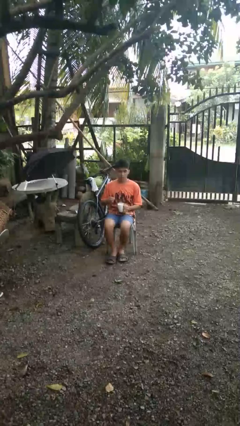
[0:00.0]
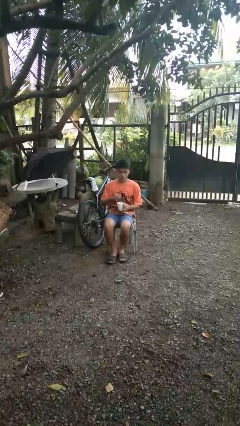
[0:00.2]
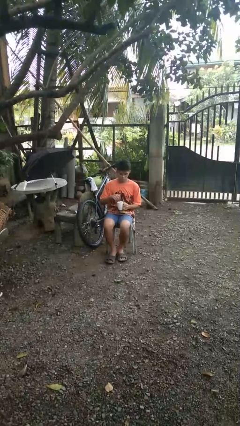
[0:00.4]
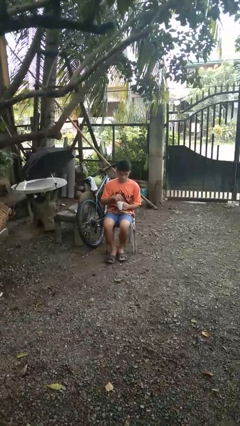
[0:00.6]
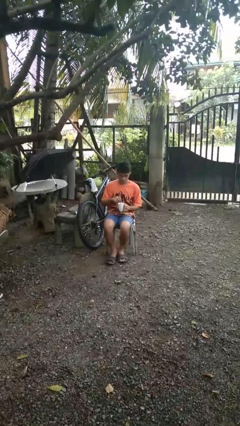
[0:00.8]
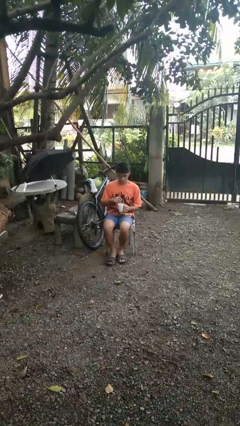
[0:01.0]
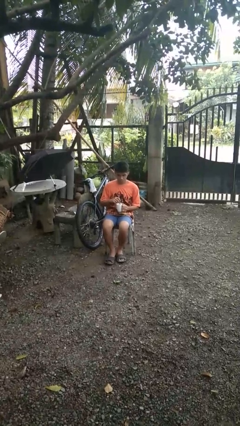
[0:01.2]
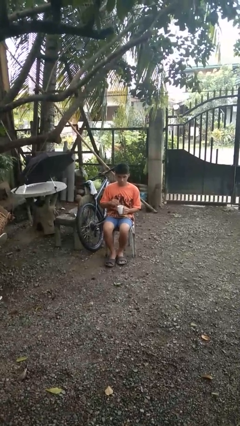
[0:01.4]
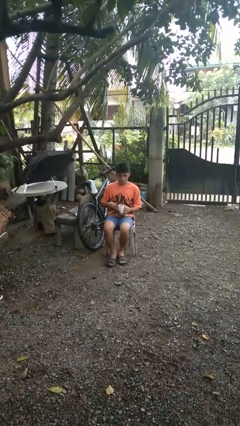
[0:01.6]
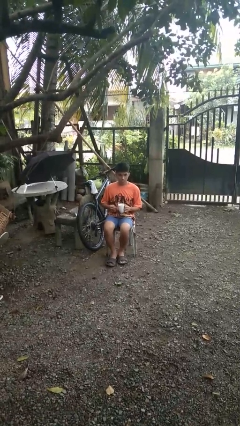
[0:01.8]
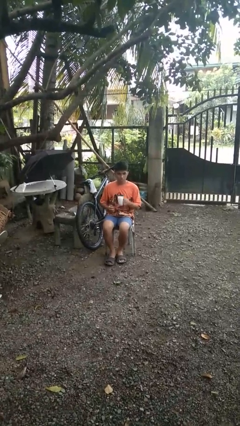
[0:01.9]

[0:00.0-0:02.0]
person stirs mug

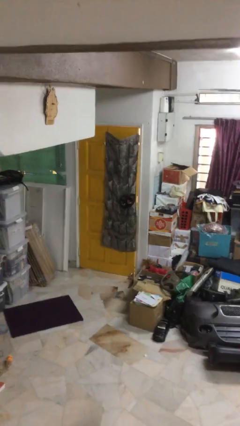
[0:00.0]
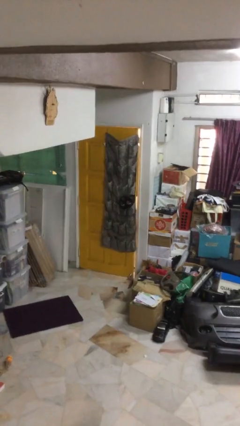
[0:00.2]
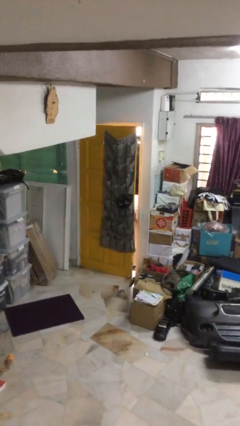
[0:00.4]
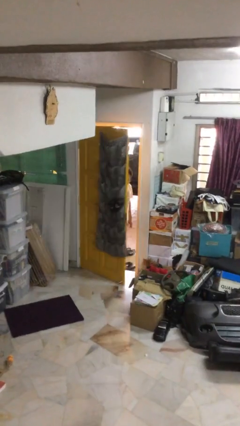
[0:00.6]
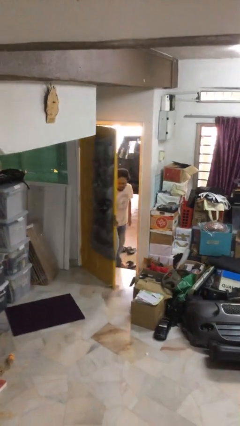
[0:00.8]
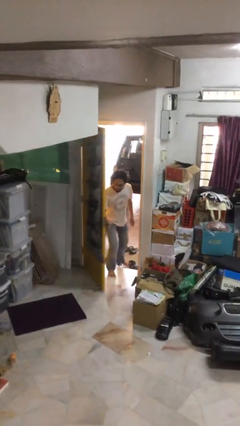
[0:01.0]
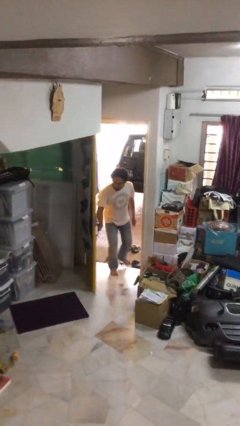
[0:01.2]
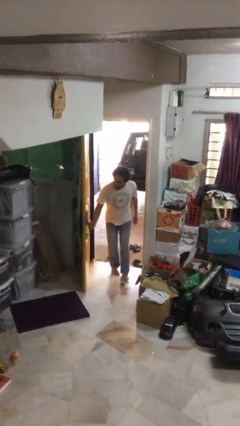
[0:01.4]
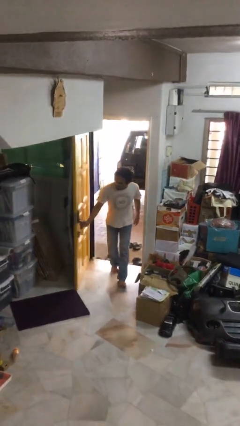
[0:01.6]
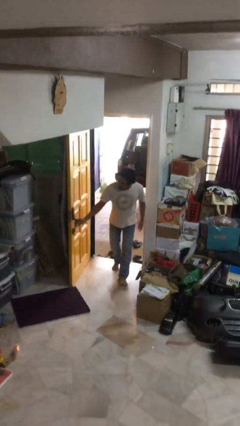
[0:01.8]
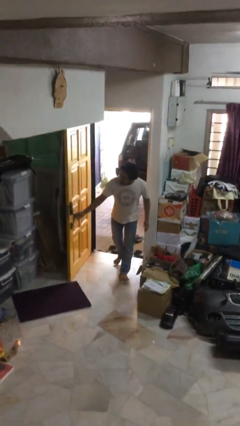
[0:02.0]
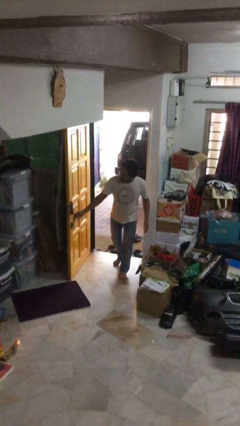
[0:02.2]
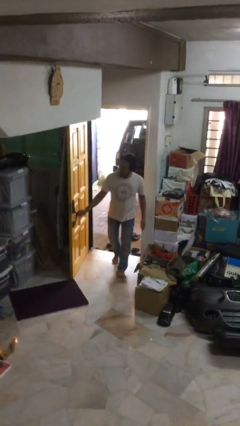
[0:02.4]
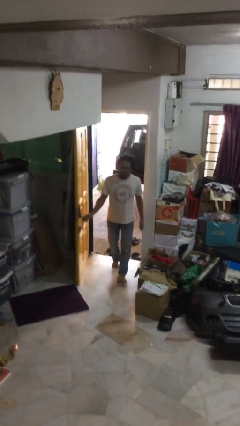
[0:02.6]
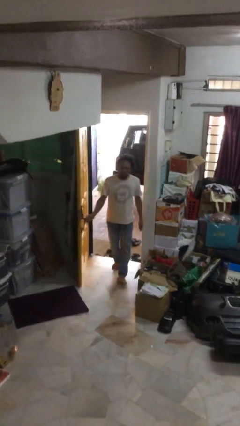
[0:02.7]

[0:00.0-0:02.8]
person opens facility door

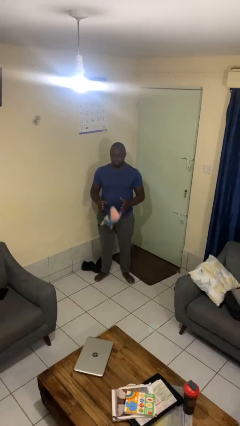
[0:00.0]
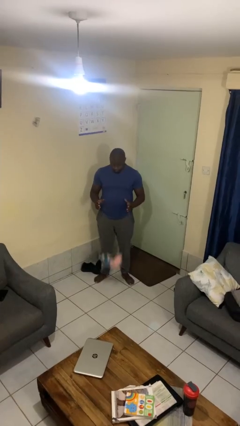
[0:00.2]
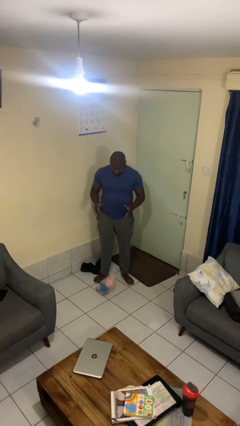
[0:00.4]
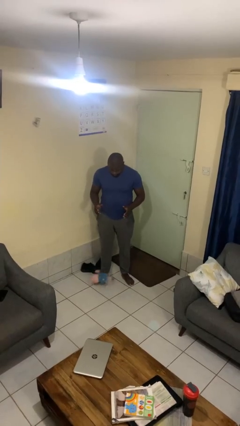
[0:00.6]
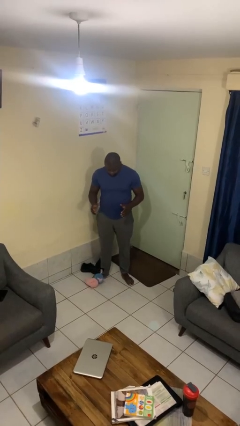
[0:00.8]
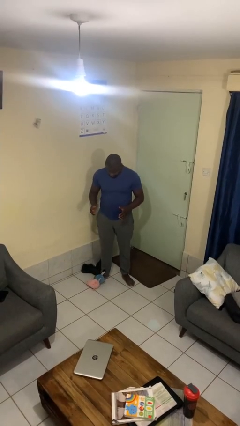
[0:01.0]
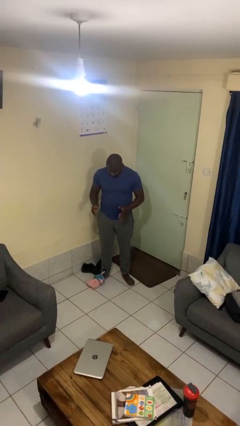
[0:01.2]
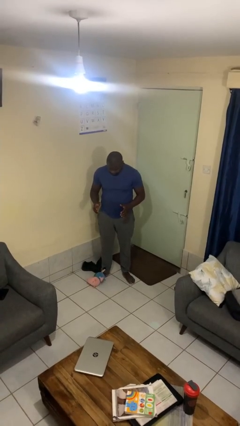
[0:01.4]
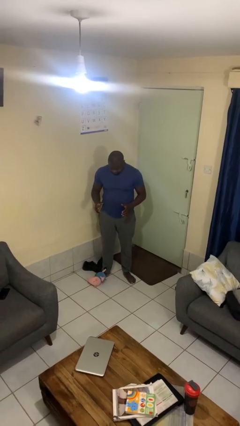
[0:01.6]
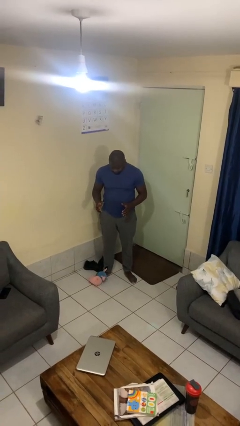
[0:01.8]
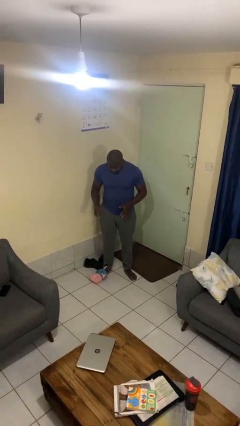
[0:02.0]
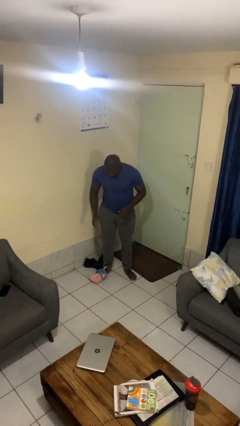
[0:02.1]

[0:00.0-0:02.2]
person drops object

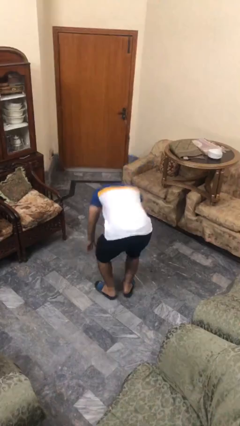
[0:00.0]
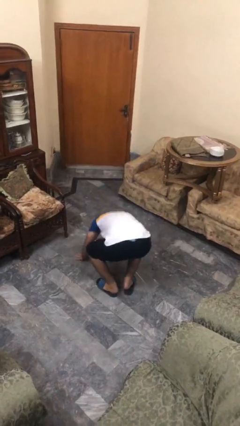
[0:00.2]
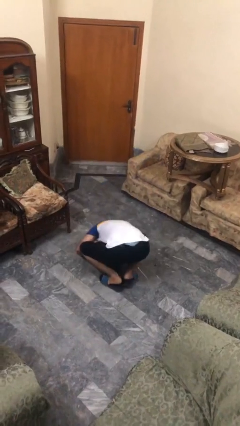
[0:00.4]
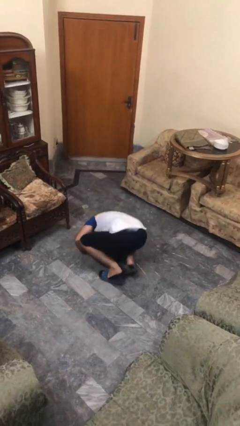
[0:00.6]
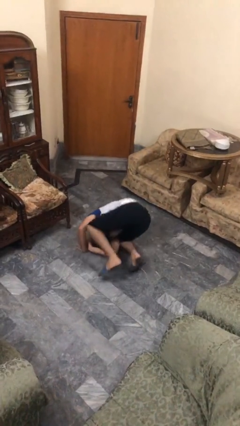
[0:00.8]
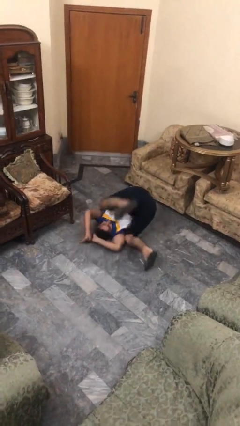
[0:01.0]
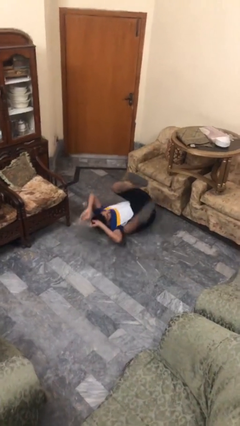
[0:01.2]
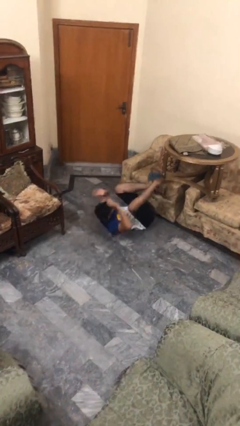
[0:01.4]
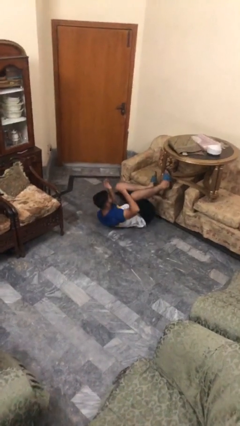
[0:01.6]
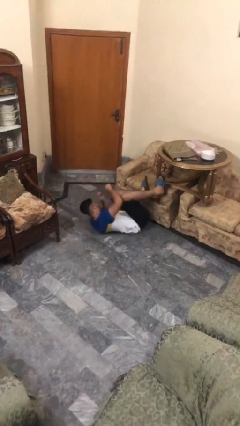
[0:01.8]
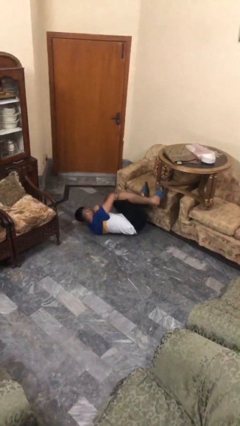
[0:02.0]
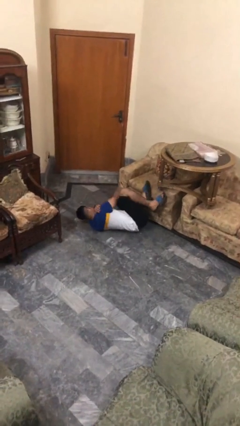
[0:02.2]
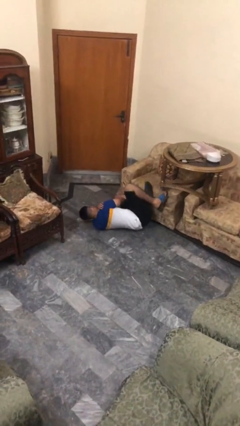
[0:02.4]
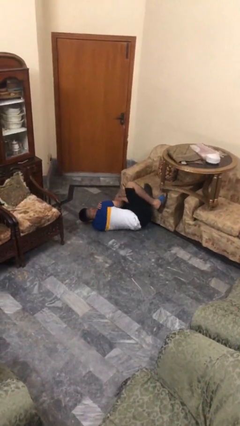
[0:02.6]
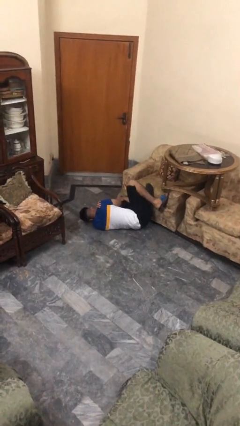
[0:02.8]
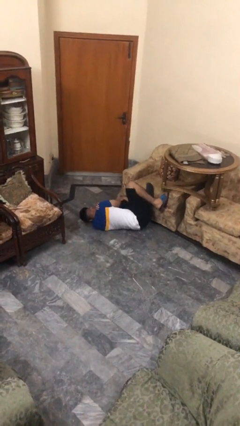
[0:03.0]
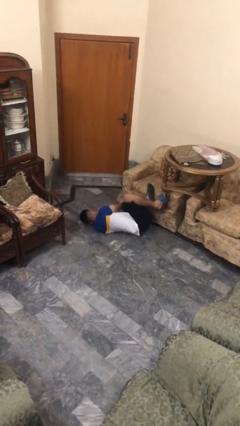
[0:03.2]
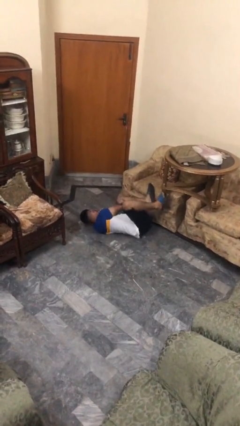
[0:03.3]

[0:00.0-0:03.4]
person somersaults

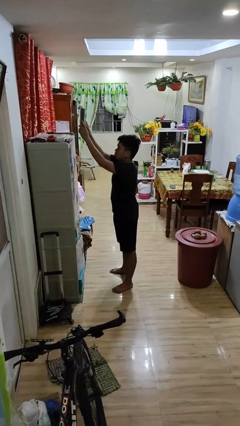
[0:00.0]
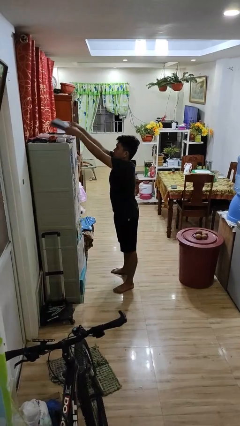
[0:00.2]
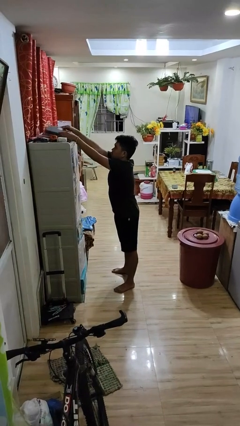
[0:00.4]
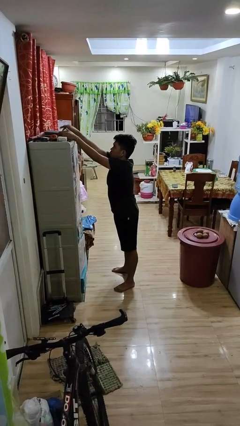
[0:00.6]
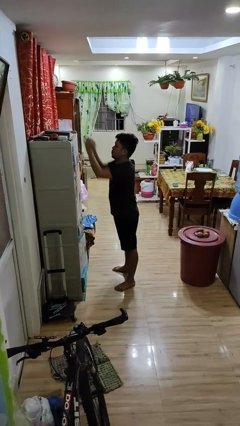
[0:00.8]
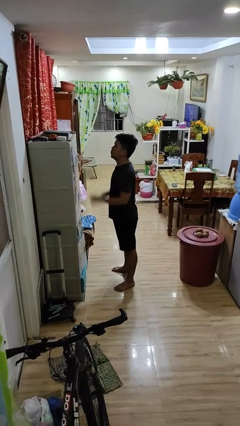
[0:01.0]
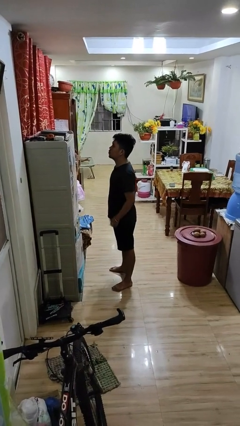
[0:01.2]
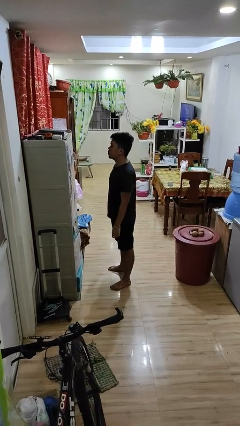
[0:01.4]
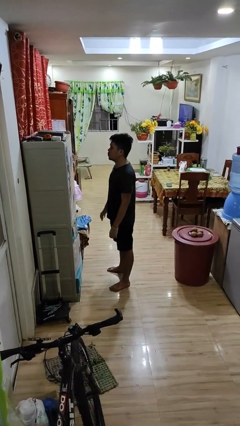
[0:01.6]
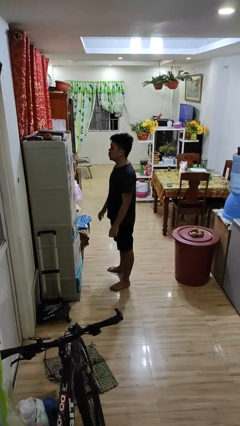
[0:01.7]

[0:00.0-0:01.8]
person puts down object on shelf

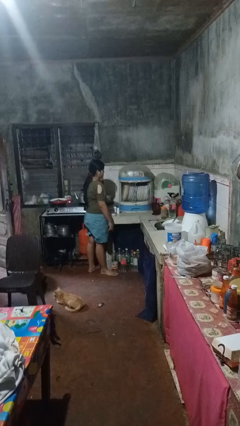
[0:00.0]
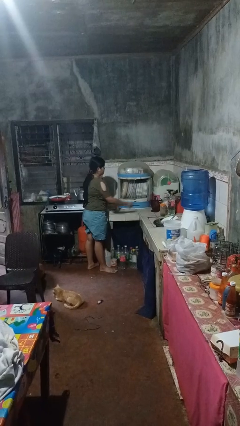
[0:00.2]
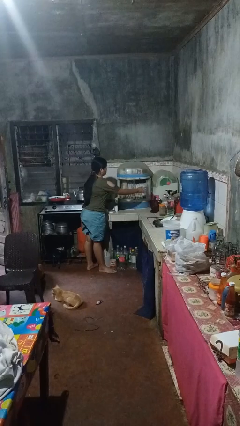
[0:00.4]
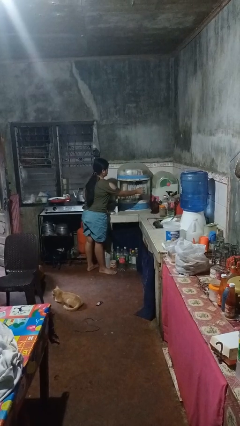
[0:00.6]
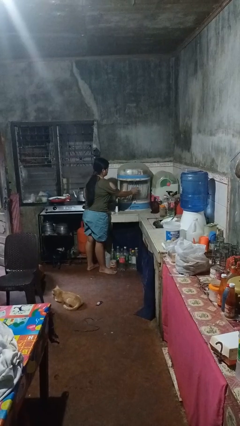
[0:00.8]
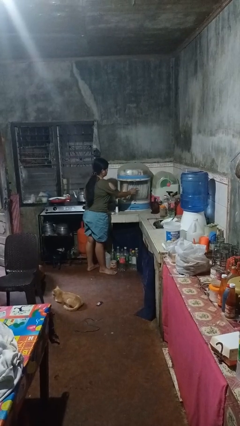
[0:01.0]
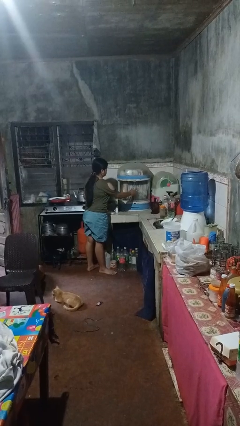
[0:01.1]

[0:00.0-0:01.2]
person closes kitchen drawer

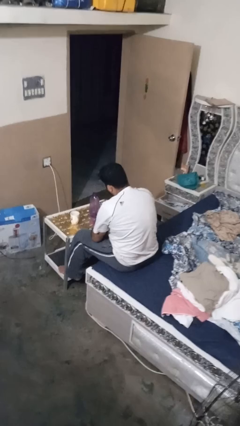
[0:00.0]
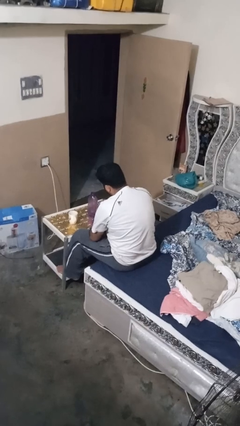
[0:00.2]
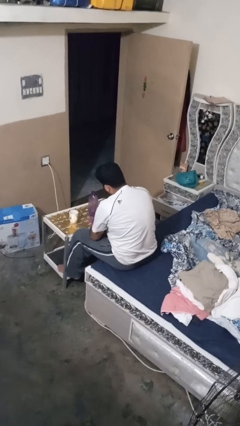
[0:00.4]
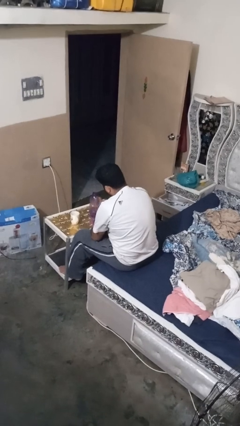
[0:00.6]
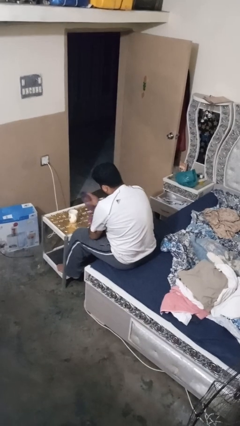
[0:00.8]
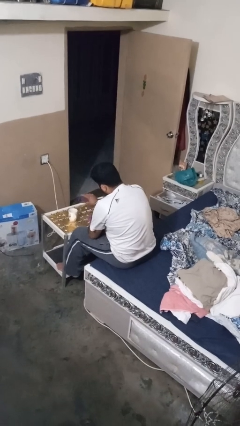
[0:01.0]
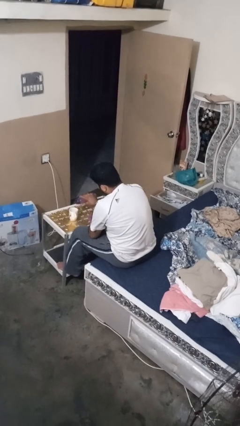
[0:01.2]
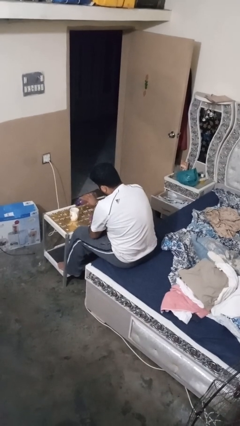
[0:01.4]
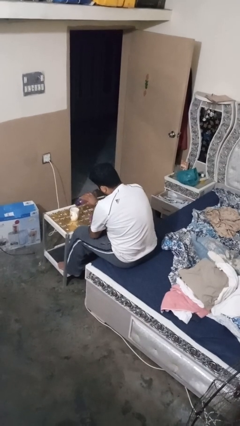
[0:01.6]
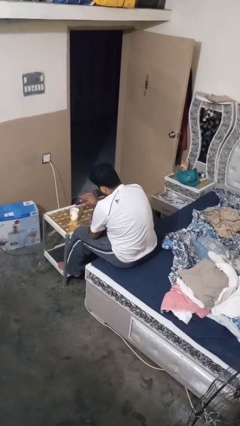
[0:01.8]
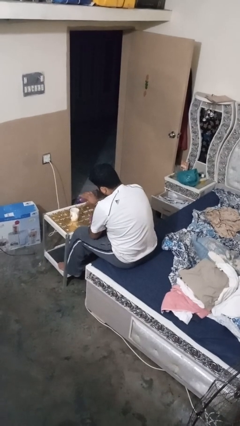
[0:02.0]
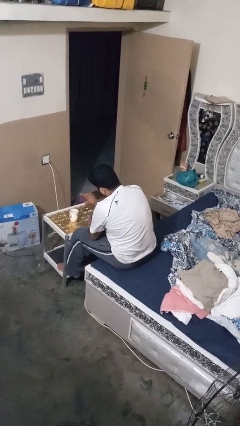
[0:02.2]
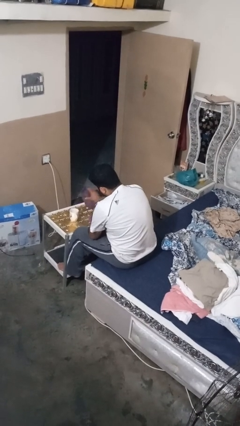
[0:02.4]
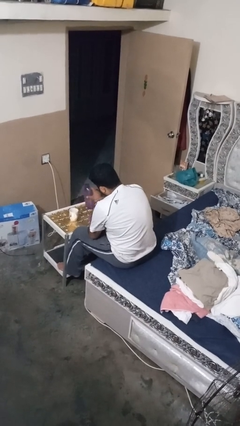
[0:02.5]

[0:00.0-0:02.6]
person pours liquid into cup

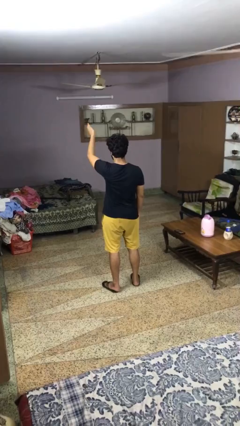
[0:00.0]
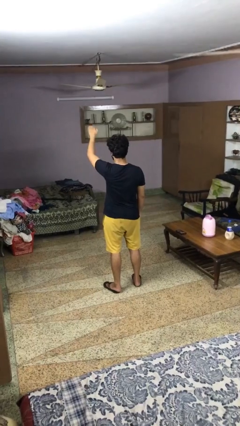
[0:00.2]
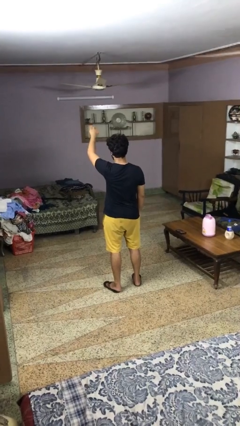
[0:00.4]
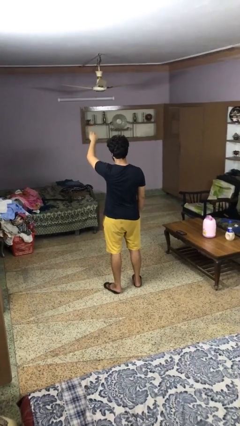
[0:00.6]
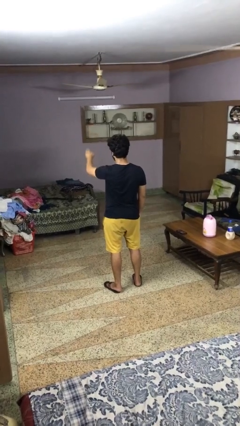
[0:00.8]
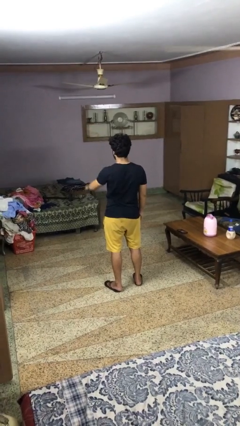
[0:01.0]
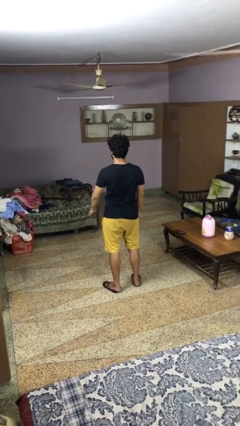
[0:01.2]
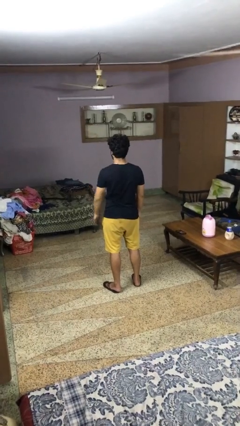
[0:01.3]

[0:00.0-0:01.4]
person gestures swipe down
